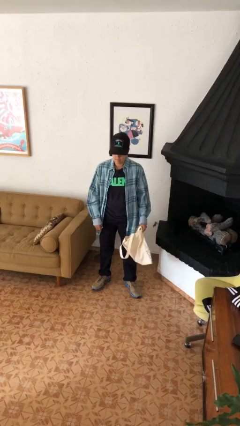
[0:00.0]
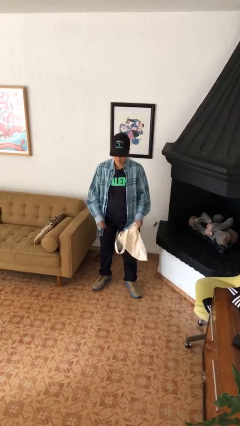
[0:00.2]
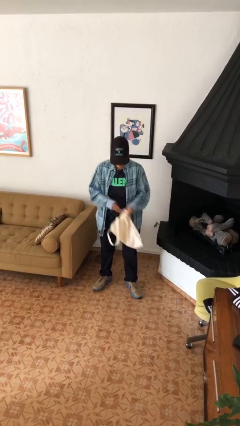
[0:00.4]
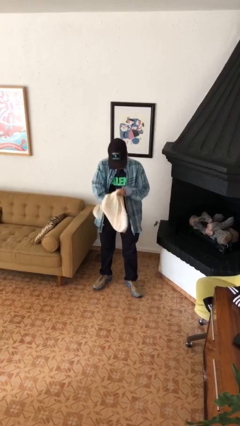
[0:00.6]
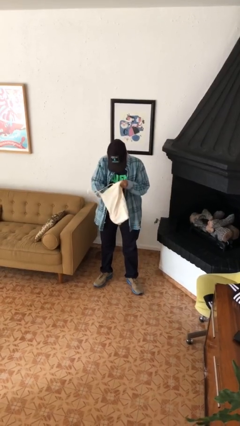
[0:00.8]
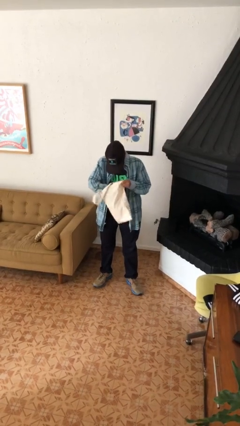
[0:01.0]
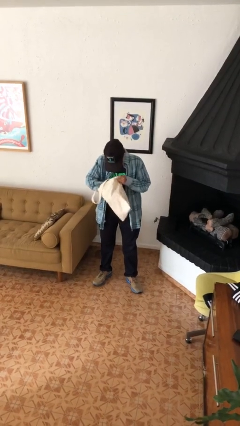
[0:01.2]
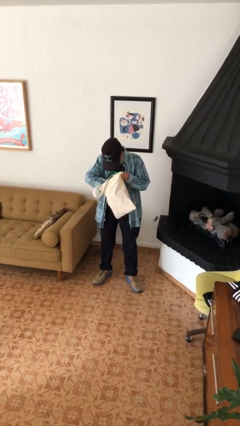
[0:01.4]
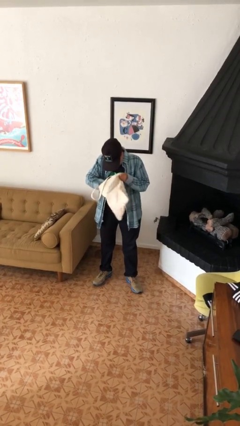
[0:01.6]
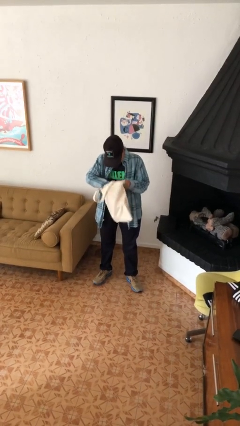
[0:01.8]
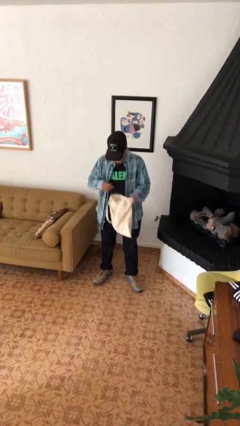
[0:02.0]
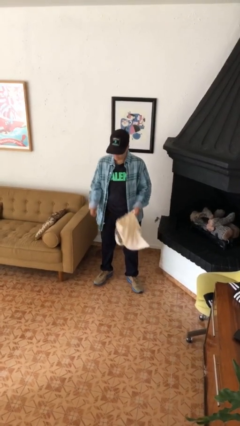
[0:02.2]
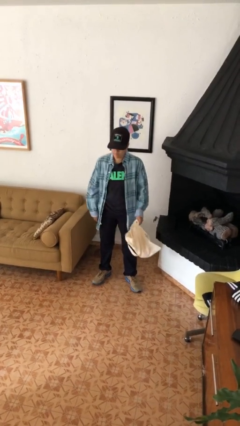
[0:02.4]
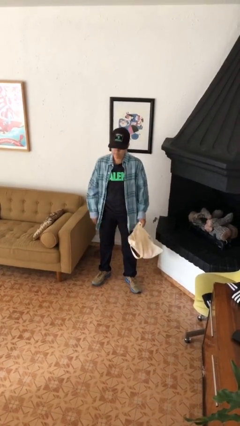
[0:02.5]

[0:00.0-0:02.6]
person searches in bag

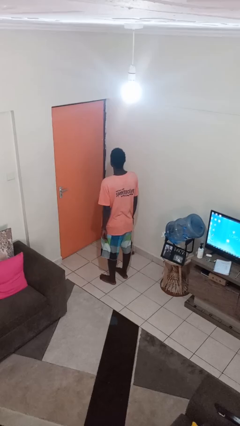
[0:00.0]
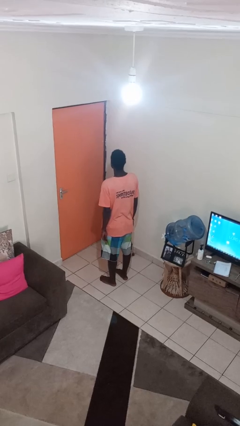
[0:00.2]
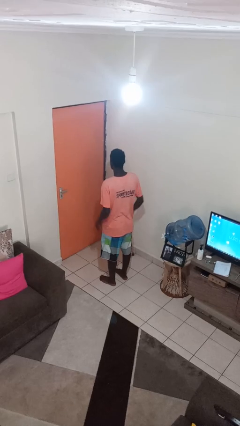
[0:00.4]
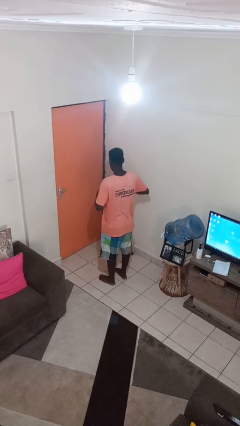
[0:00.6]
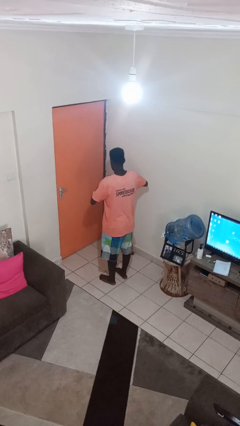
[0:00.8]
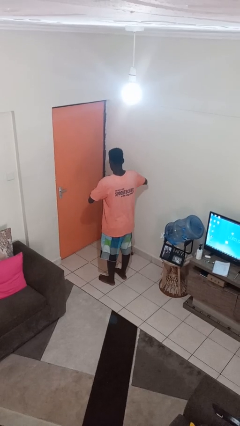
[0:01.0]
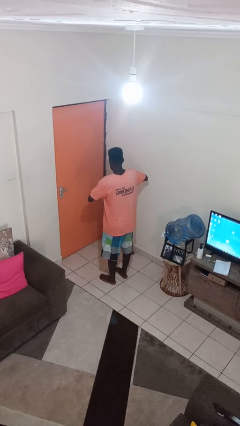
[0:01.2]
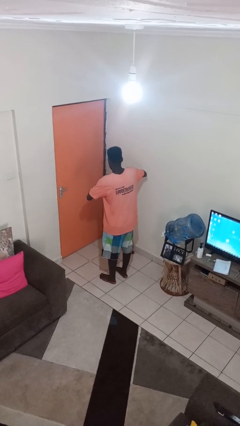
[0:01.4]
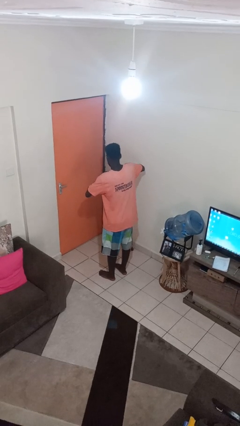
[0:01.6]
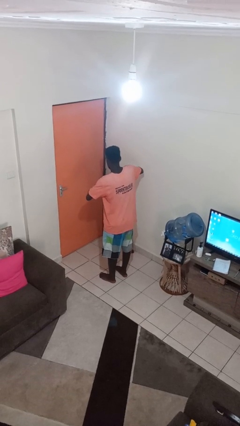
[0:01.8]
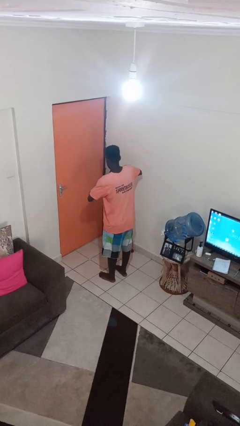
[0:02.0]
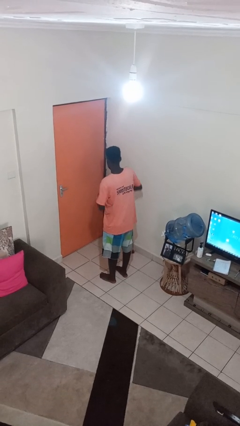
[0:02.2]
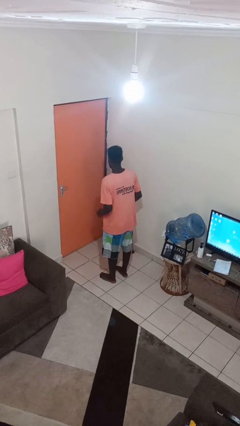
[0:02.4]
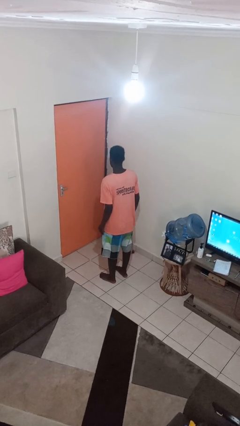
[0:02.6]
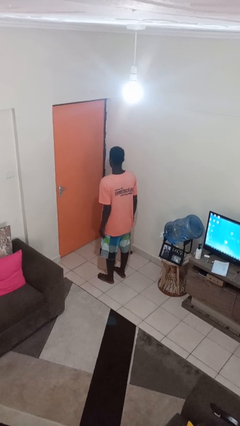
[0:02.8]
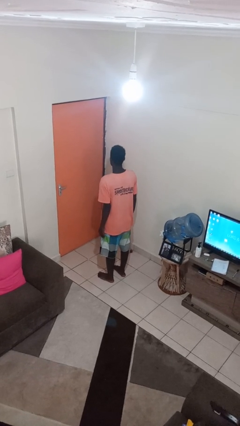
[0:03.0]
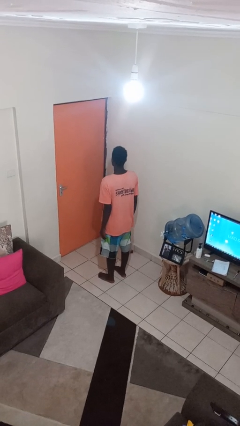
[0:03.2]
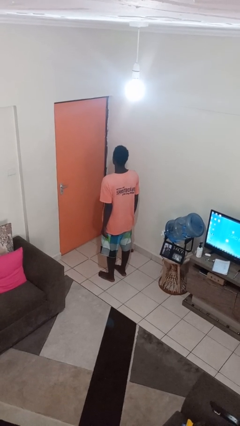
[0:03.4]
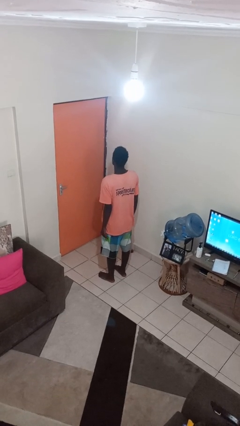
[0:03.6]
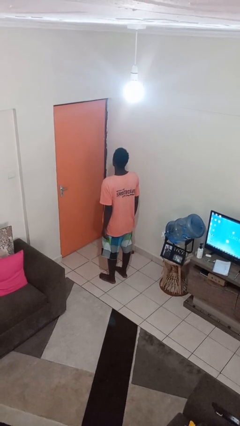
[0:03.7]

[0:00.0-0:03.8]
person puts on ring

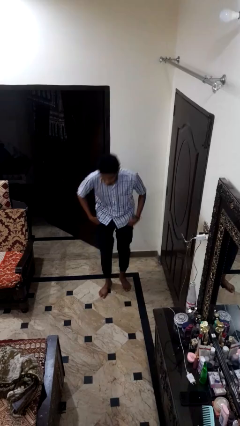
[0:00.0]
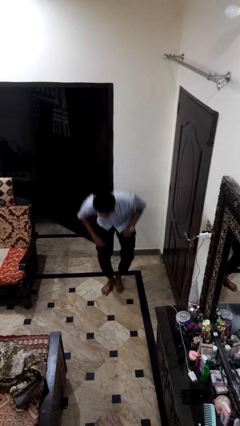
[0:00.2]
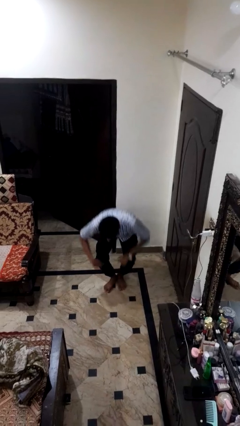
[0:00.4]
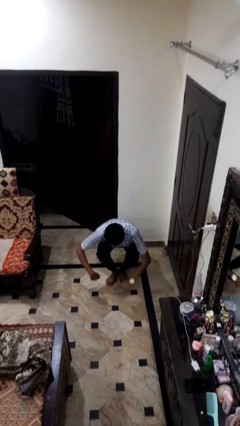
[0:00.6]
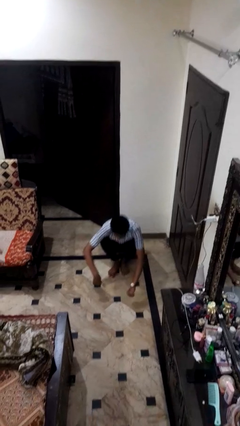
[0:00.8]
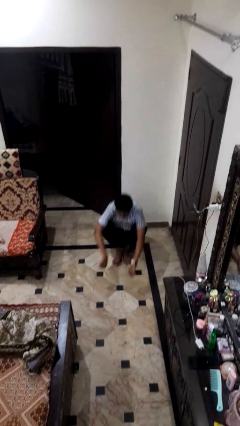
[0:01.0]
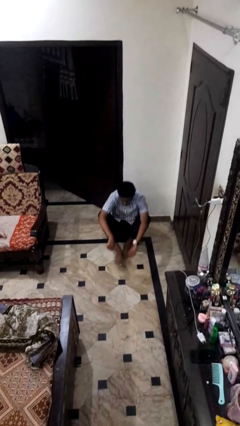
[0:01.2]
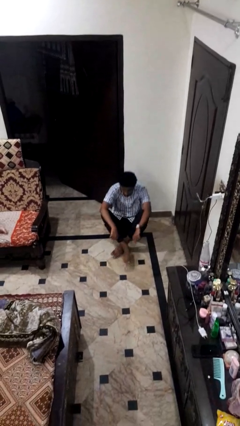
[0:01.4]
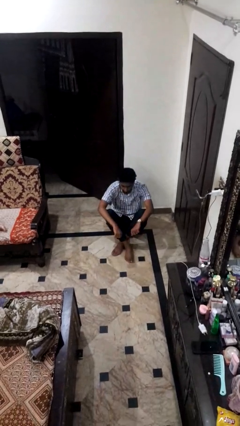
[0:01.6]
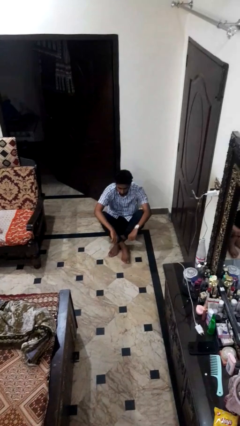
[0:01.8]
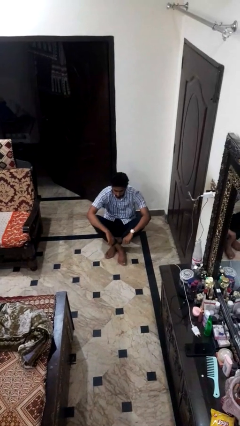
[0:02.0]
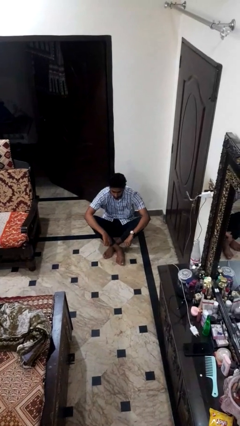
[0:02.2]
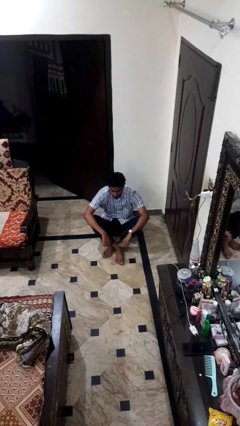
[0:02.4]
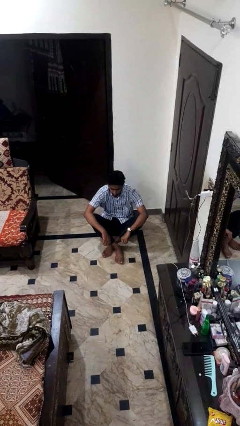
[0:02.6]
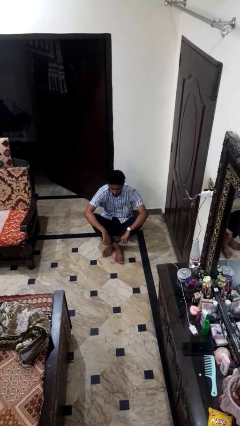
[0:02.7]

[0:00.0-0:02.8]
person sits crisscross

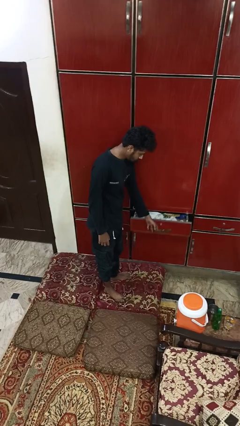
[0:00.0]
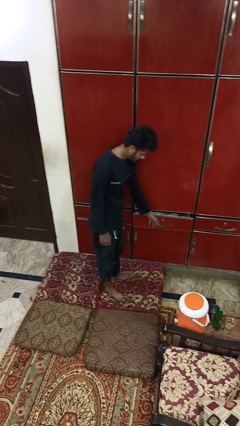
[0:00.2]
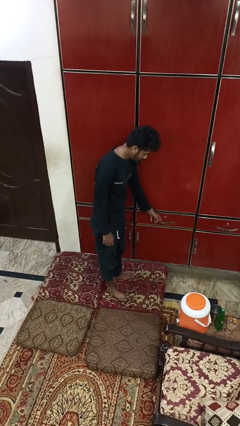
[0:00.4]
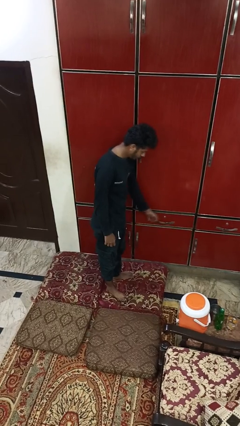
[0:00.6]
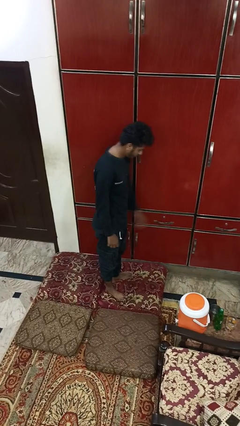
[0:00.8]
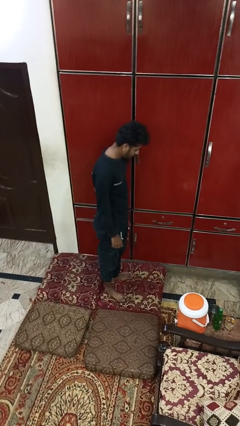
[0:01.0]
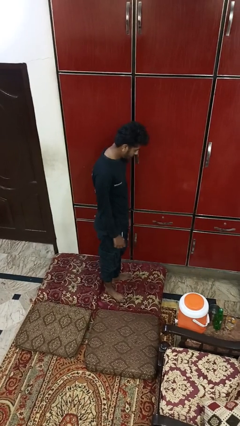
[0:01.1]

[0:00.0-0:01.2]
person closes dresser drawer

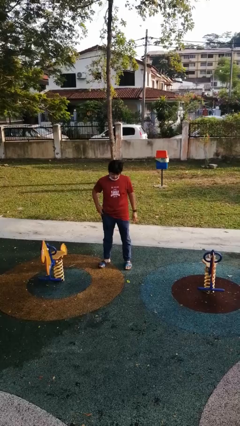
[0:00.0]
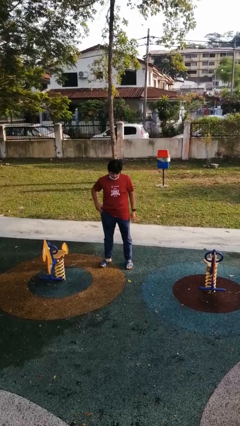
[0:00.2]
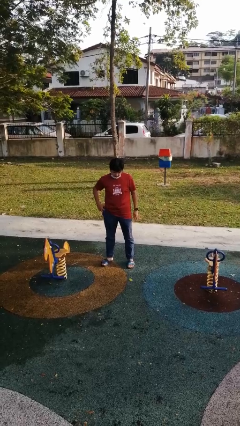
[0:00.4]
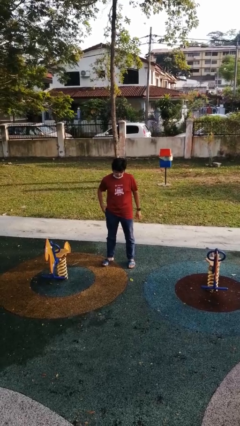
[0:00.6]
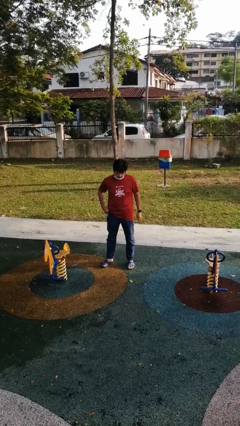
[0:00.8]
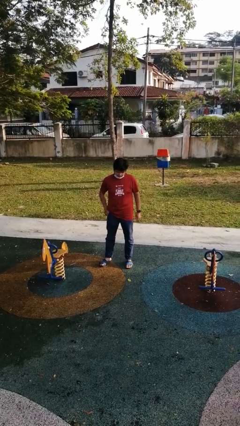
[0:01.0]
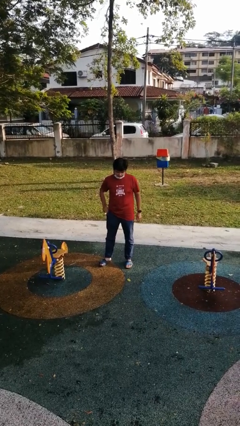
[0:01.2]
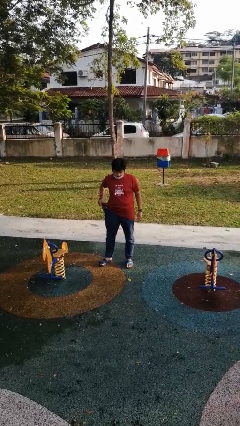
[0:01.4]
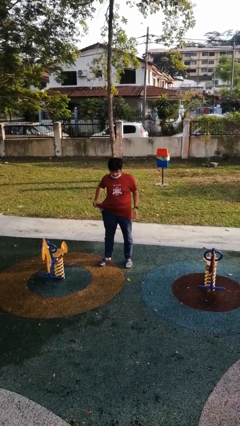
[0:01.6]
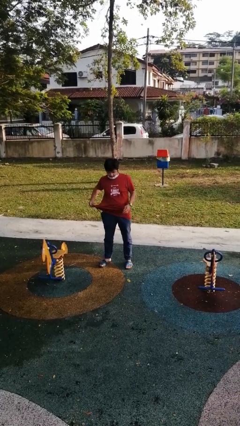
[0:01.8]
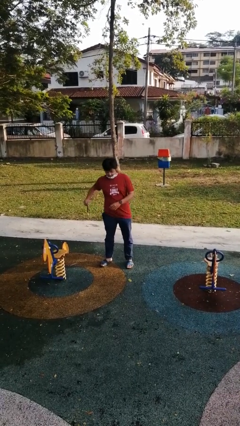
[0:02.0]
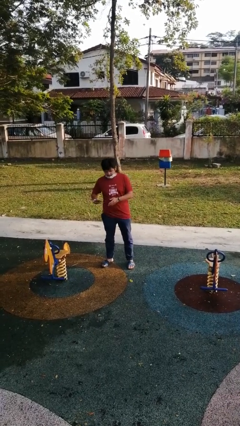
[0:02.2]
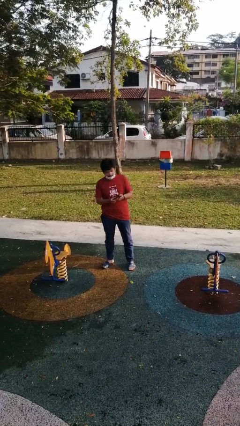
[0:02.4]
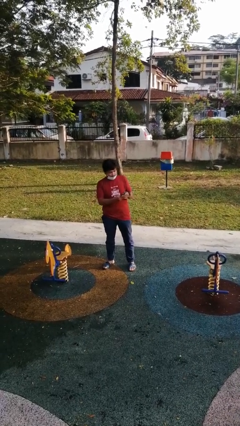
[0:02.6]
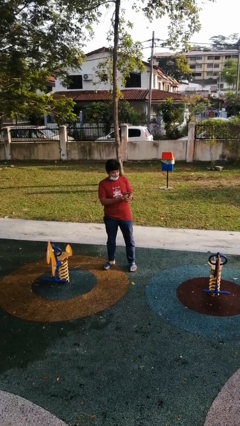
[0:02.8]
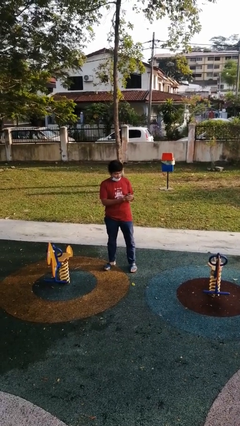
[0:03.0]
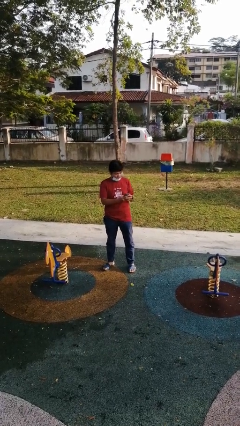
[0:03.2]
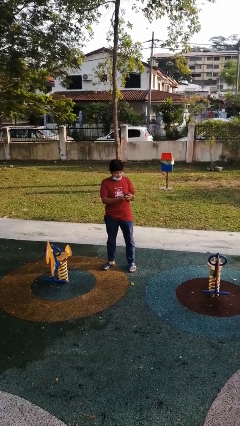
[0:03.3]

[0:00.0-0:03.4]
person takes phone from pocket

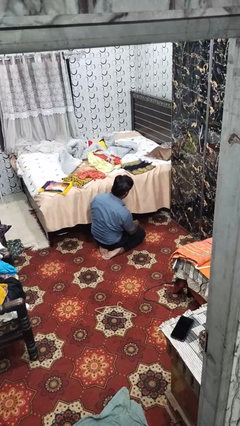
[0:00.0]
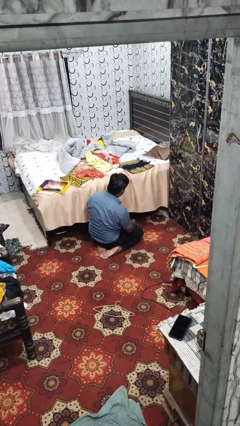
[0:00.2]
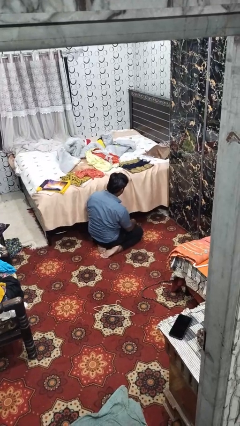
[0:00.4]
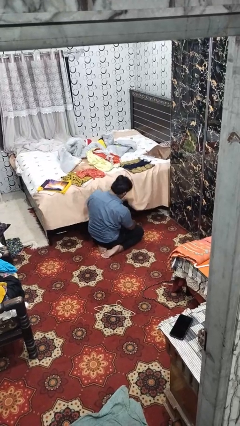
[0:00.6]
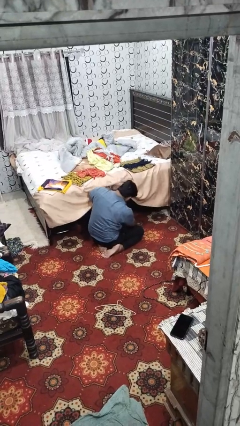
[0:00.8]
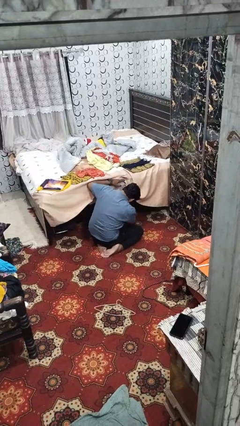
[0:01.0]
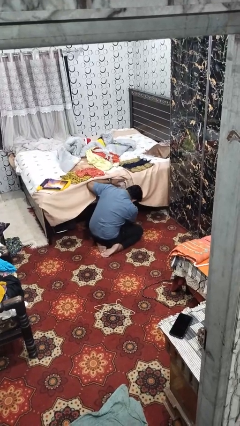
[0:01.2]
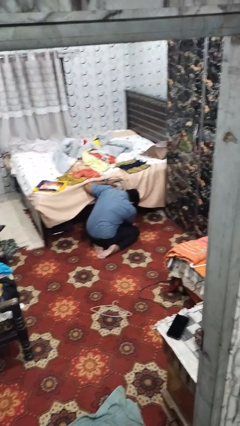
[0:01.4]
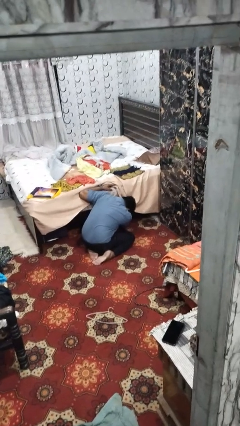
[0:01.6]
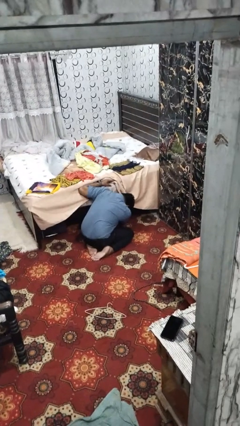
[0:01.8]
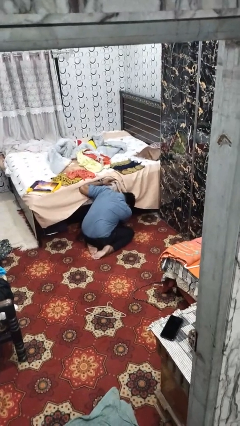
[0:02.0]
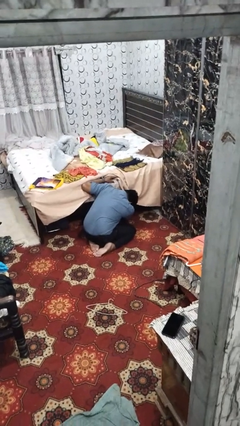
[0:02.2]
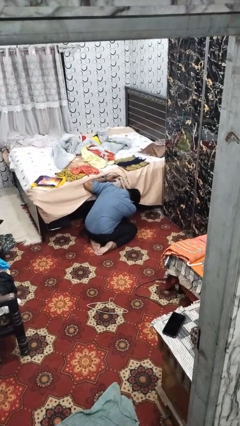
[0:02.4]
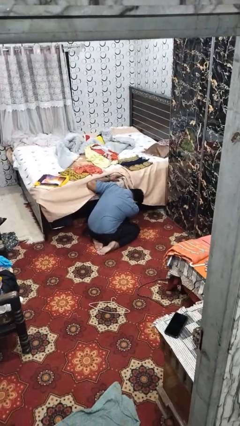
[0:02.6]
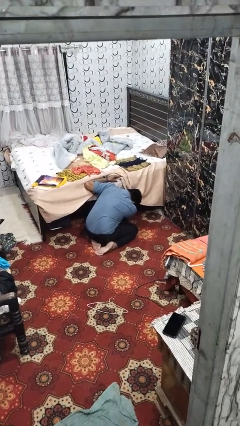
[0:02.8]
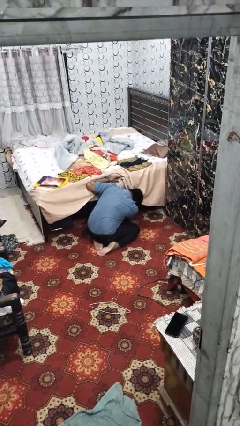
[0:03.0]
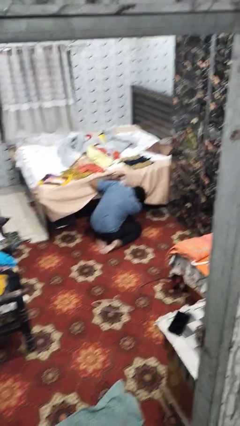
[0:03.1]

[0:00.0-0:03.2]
person searches under bed

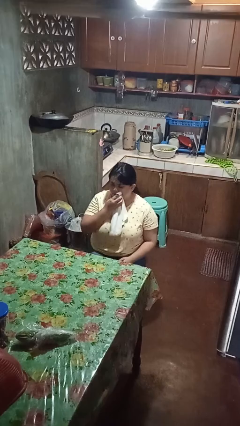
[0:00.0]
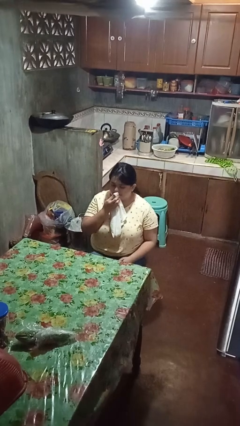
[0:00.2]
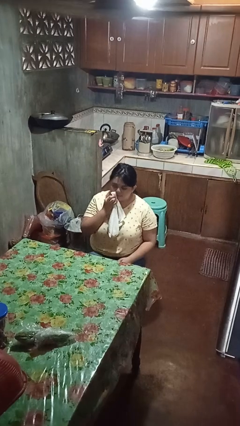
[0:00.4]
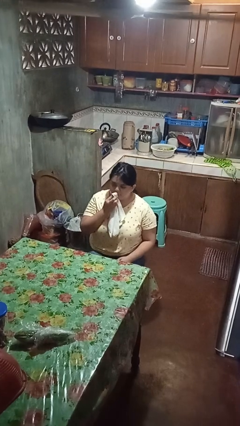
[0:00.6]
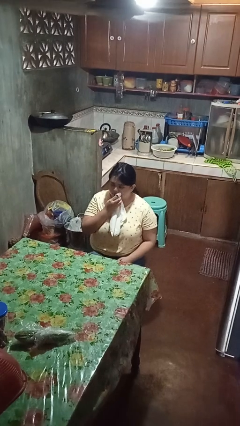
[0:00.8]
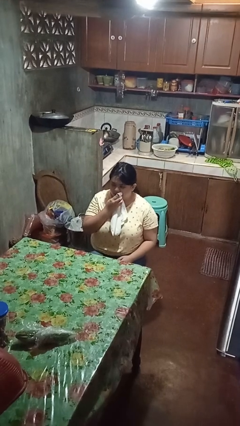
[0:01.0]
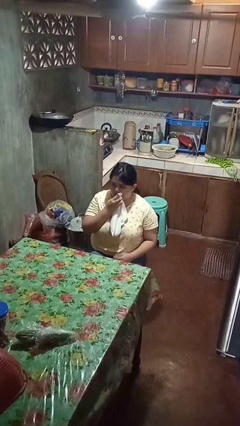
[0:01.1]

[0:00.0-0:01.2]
person wipes mouth with napkin
